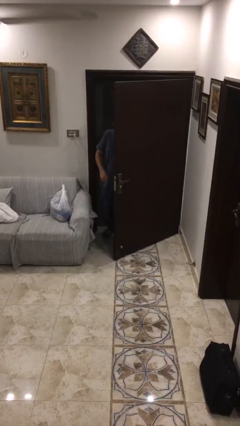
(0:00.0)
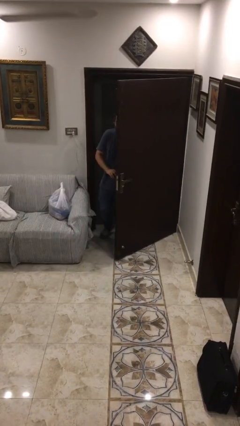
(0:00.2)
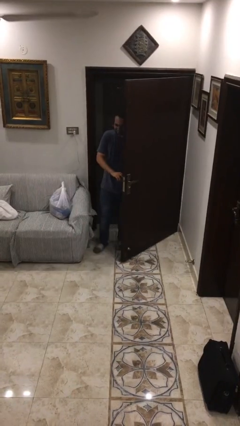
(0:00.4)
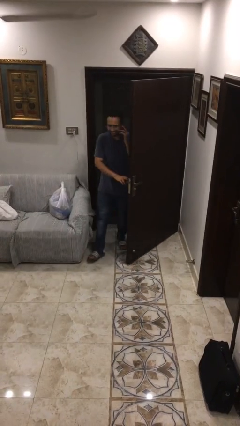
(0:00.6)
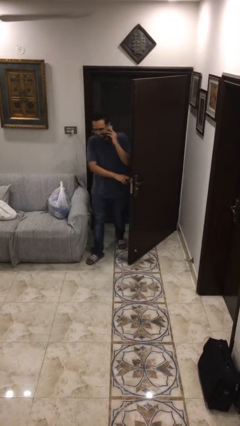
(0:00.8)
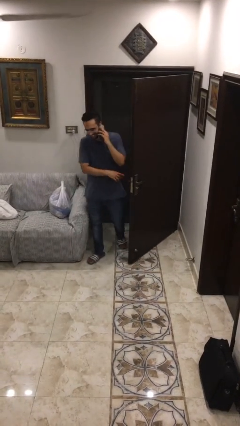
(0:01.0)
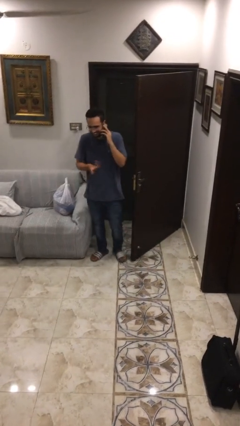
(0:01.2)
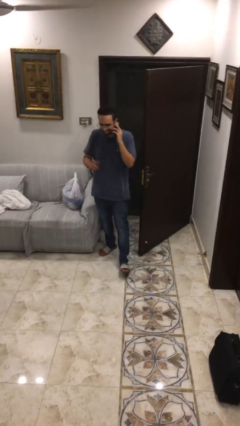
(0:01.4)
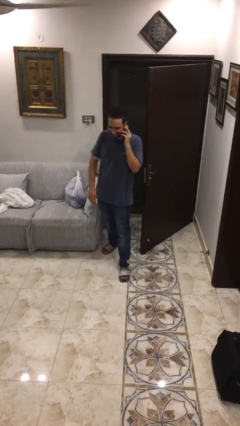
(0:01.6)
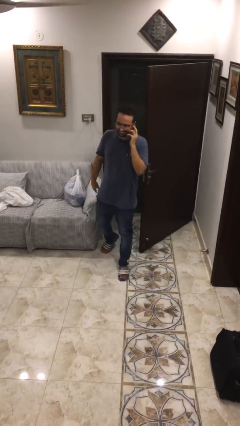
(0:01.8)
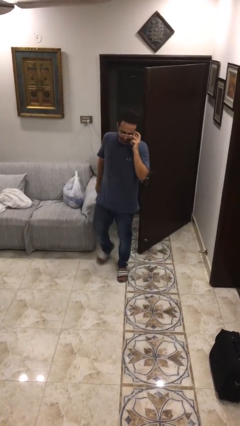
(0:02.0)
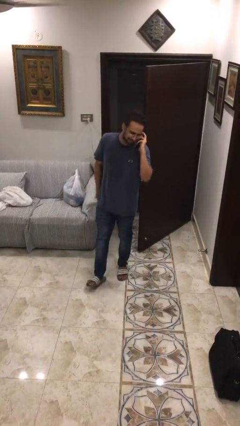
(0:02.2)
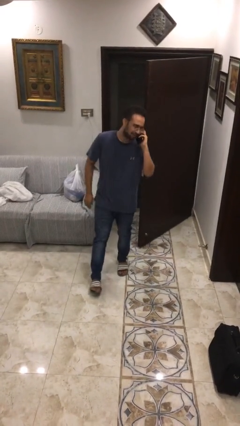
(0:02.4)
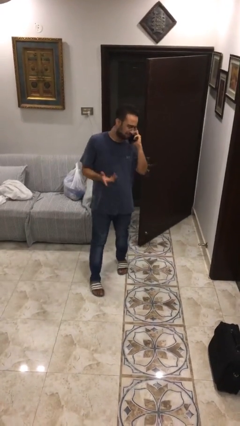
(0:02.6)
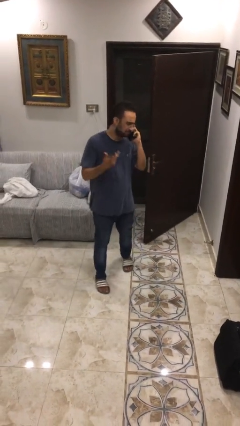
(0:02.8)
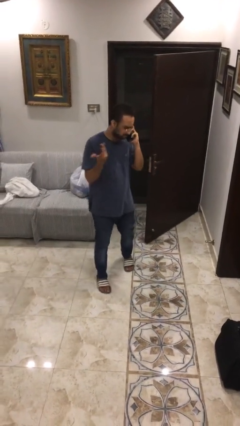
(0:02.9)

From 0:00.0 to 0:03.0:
person enters scene through structure

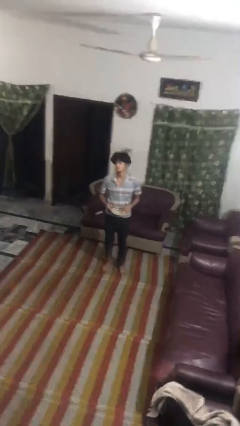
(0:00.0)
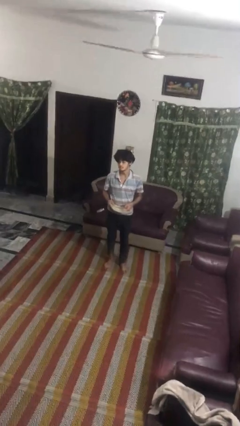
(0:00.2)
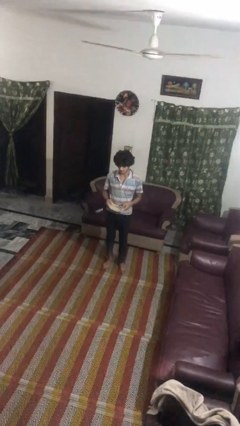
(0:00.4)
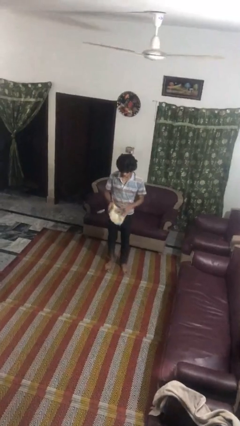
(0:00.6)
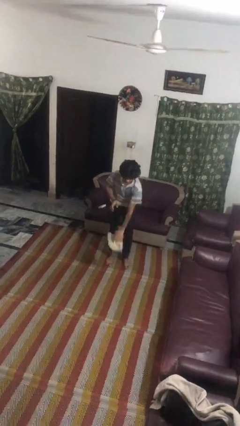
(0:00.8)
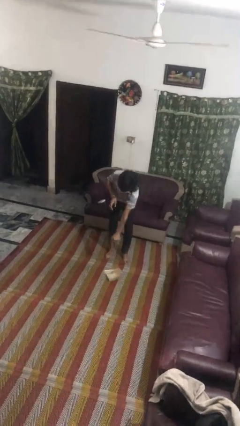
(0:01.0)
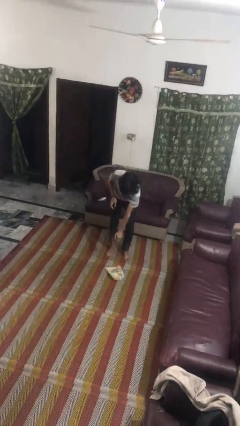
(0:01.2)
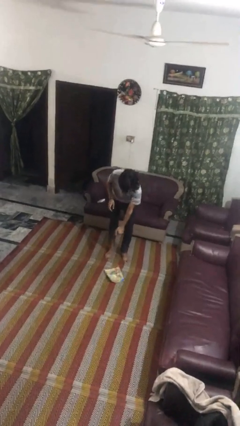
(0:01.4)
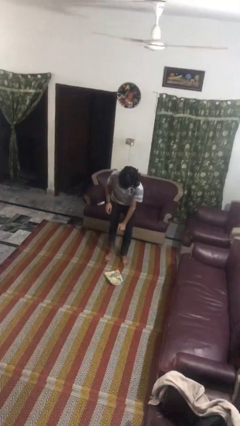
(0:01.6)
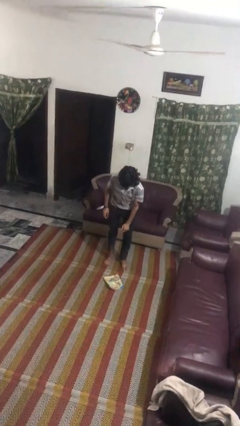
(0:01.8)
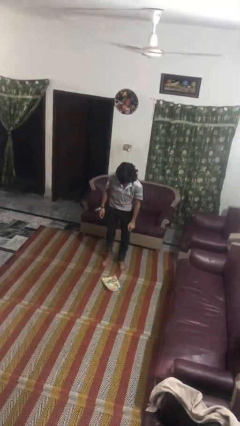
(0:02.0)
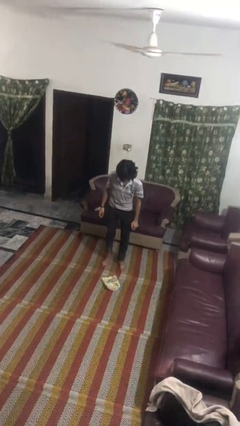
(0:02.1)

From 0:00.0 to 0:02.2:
person drops object

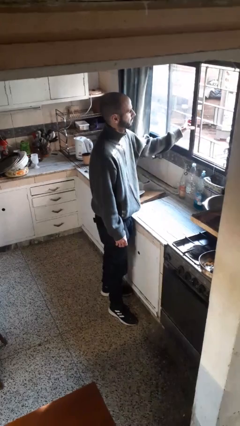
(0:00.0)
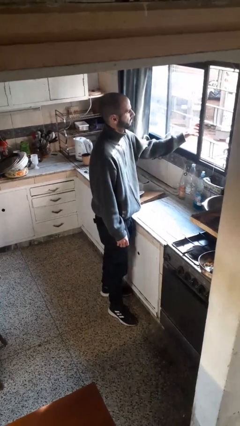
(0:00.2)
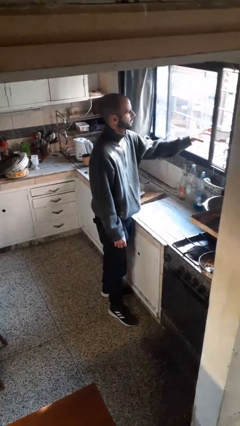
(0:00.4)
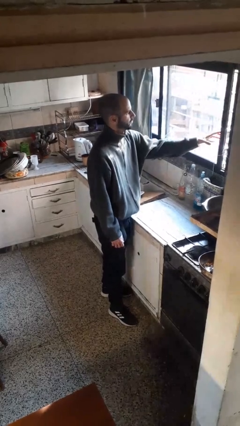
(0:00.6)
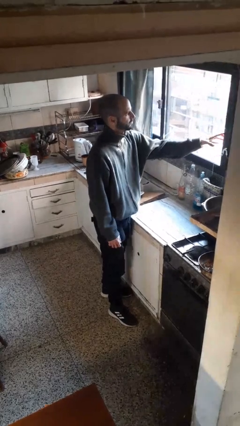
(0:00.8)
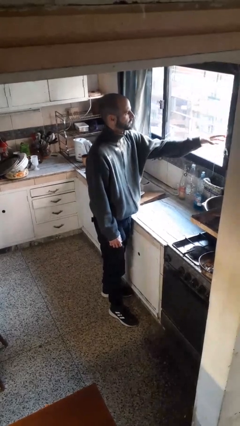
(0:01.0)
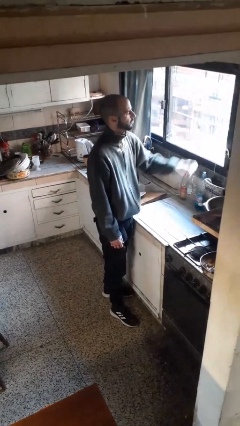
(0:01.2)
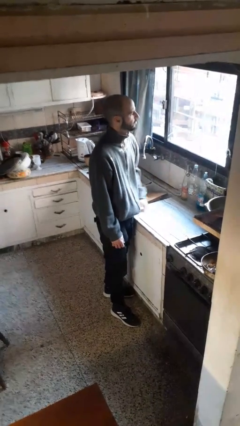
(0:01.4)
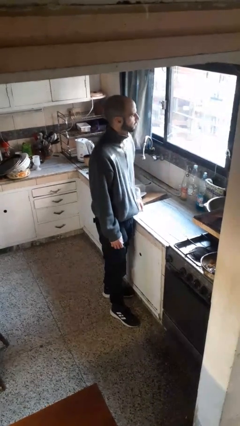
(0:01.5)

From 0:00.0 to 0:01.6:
person closes home window

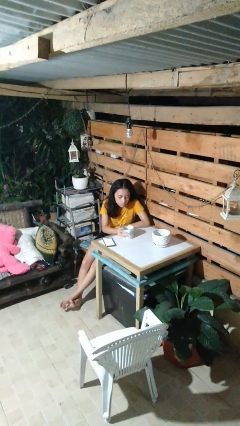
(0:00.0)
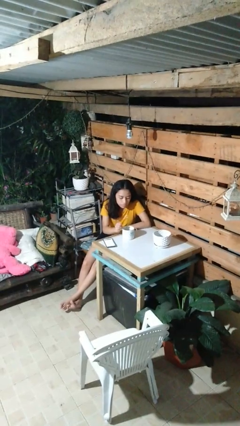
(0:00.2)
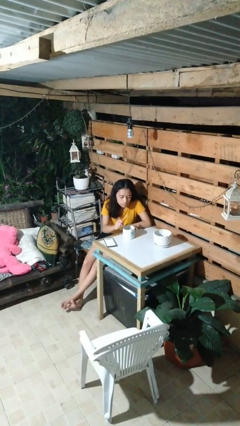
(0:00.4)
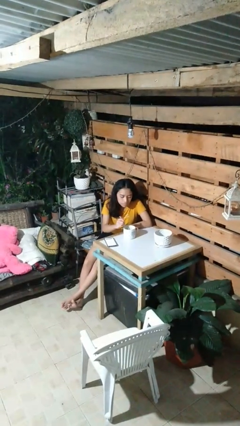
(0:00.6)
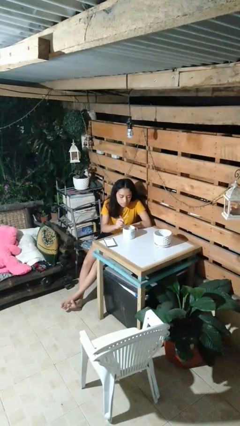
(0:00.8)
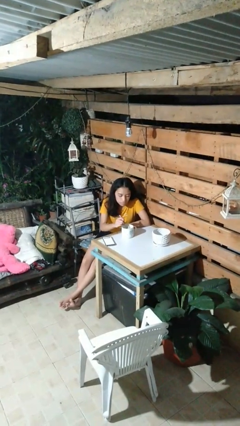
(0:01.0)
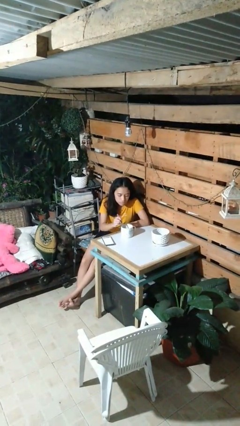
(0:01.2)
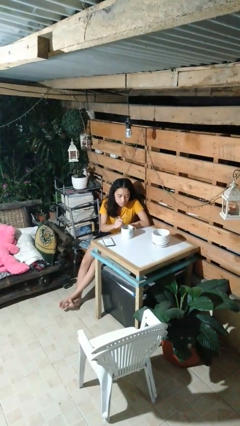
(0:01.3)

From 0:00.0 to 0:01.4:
person stirs mug

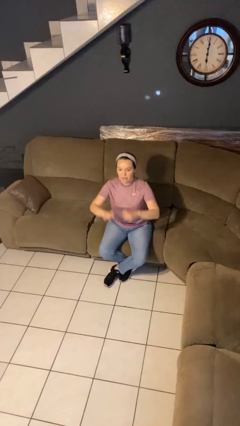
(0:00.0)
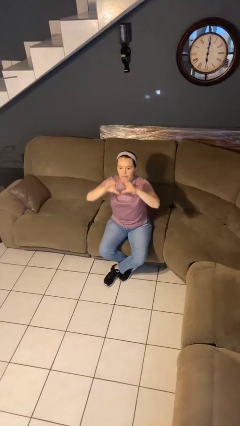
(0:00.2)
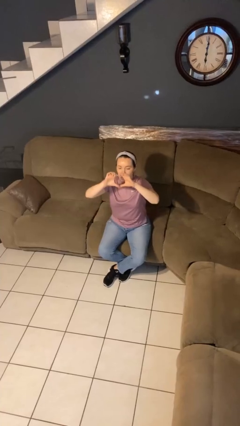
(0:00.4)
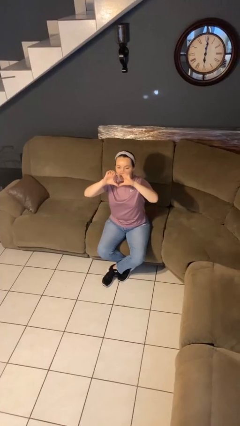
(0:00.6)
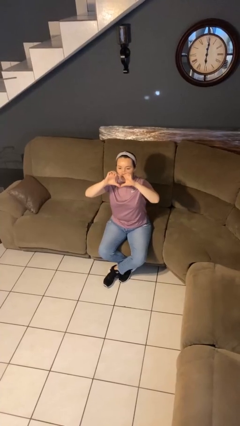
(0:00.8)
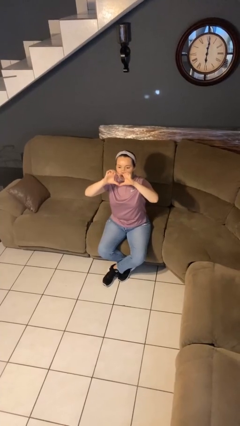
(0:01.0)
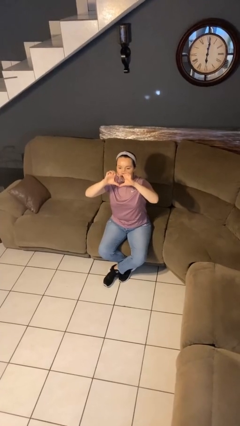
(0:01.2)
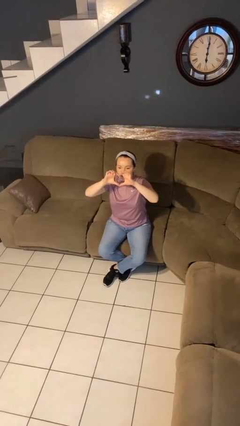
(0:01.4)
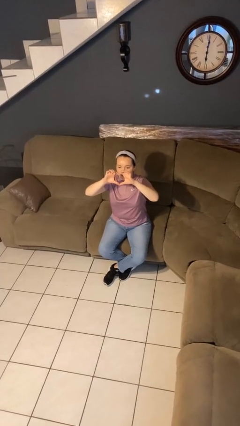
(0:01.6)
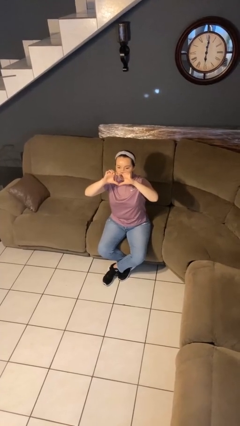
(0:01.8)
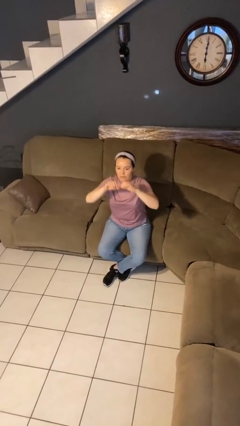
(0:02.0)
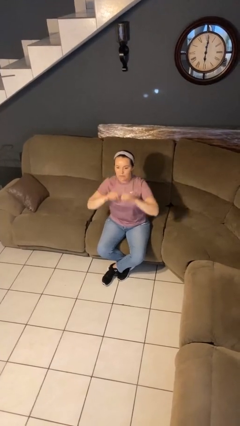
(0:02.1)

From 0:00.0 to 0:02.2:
person gestures heart

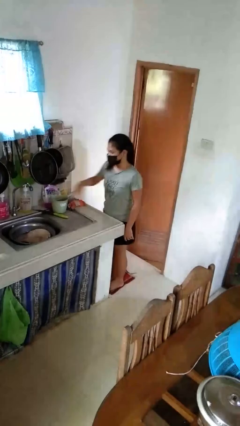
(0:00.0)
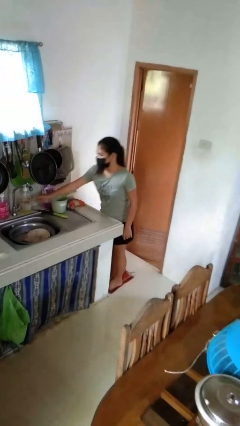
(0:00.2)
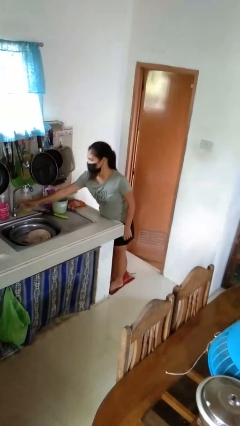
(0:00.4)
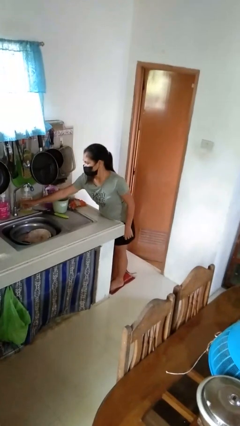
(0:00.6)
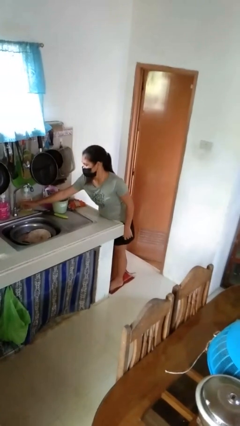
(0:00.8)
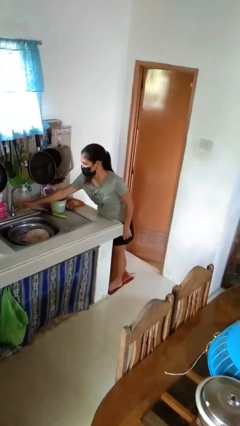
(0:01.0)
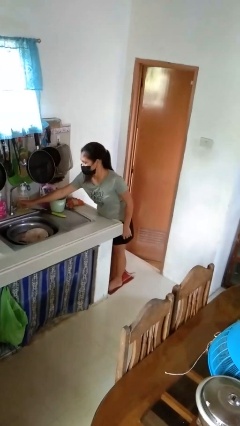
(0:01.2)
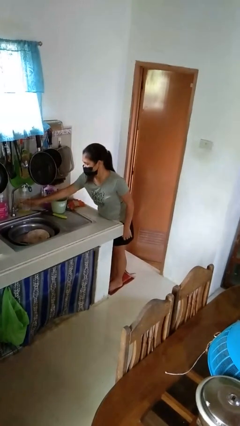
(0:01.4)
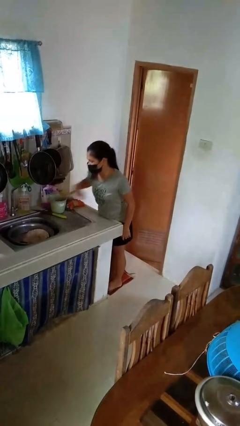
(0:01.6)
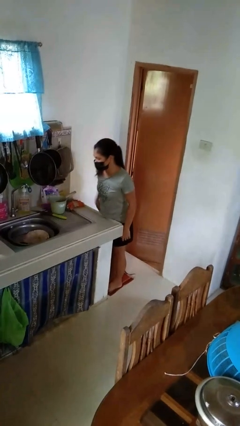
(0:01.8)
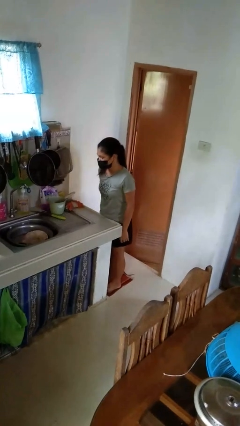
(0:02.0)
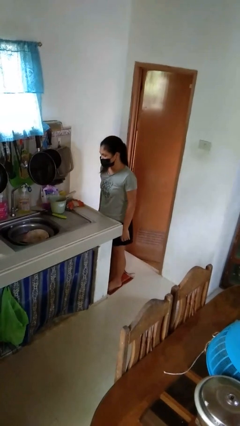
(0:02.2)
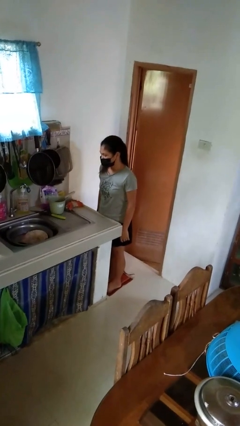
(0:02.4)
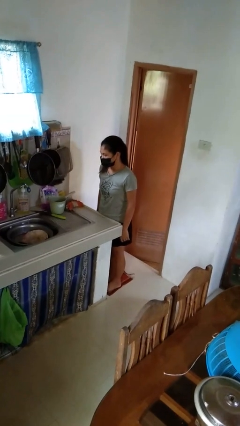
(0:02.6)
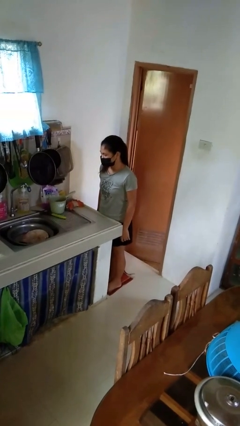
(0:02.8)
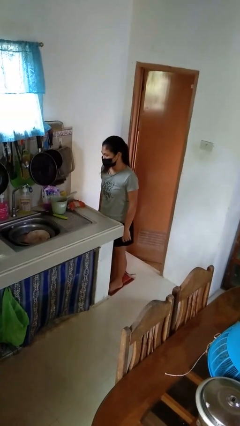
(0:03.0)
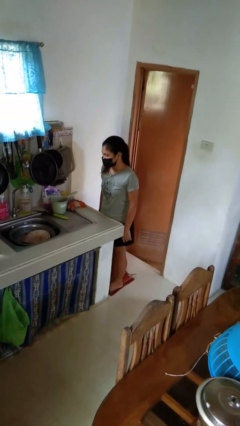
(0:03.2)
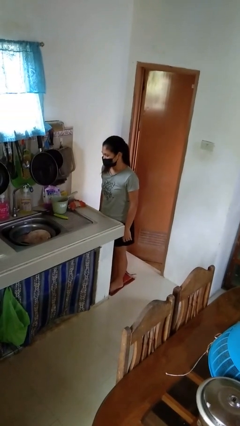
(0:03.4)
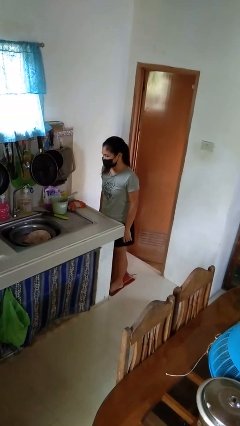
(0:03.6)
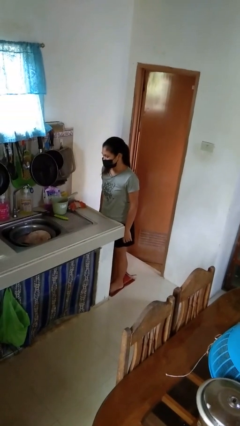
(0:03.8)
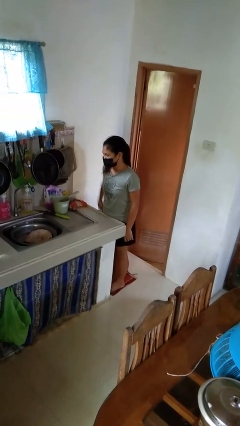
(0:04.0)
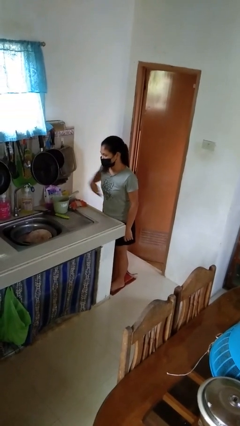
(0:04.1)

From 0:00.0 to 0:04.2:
person turns on faucet

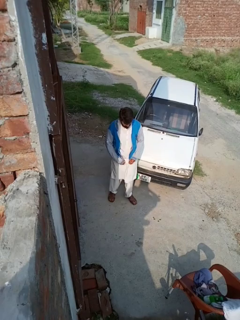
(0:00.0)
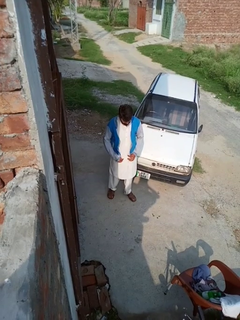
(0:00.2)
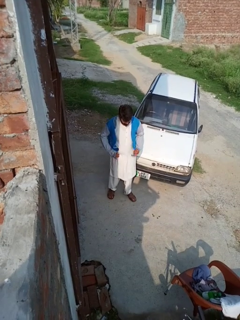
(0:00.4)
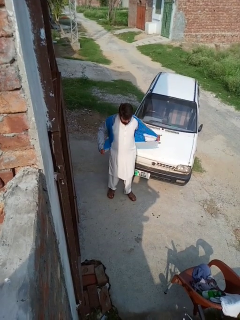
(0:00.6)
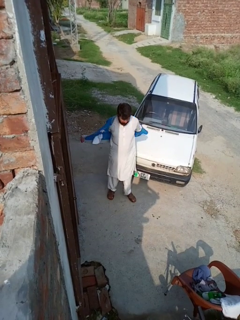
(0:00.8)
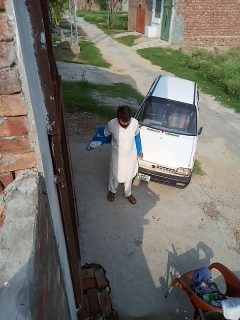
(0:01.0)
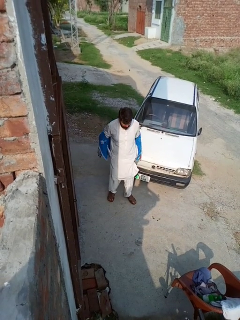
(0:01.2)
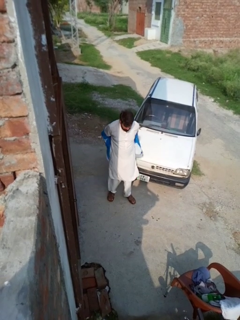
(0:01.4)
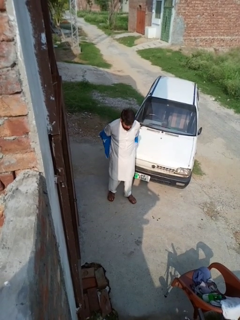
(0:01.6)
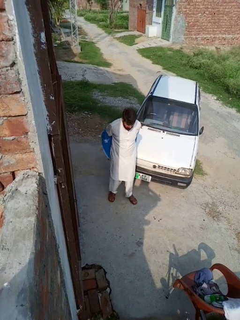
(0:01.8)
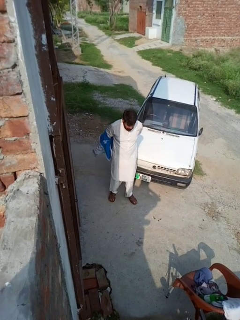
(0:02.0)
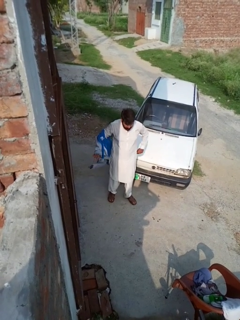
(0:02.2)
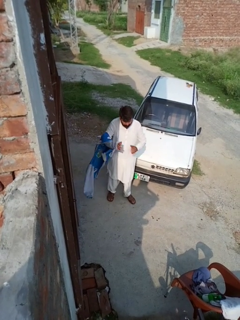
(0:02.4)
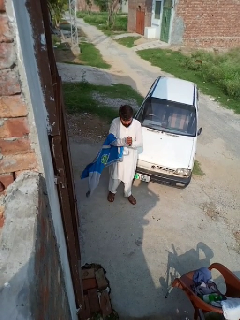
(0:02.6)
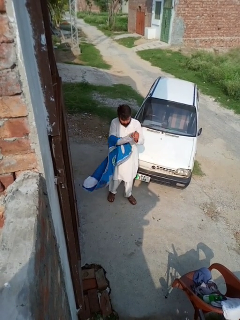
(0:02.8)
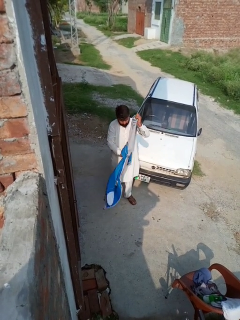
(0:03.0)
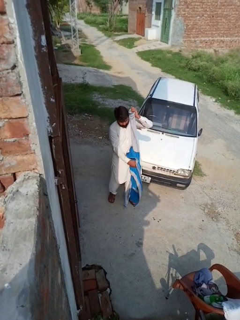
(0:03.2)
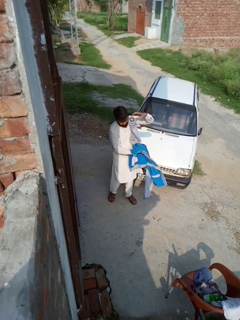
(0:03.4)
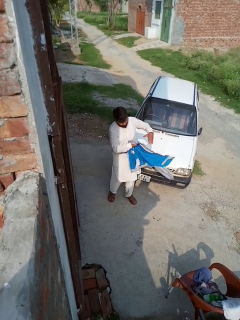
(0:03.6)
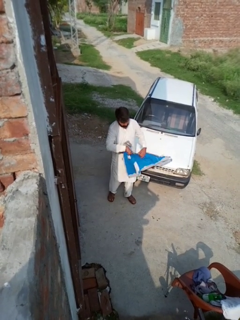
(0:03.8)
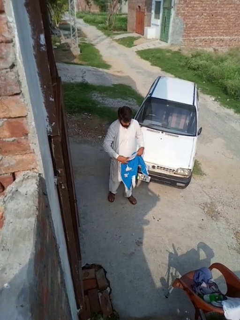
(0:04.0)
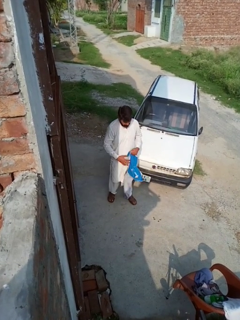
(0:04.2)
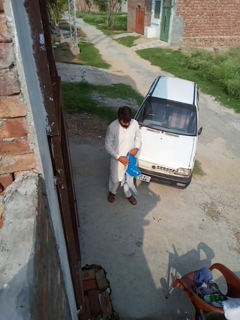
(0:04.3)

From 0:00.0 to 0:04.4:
person takes off jacket
